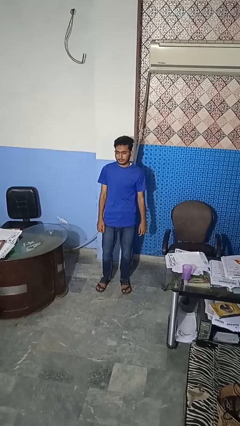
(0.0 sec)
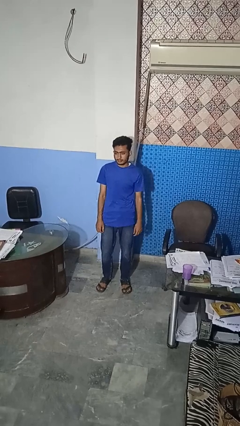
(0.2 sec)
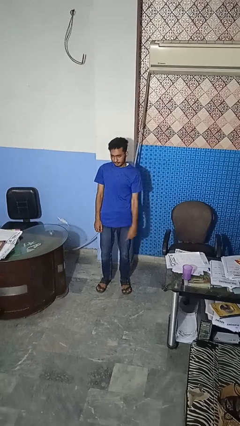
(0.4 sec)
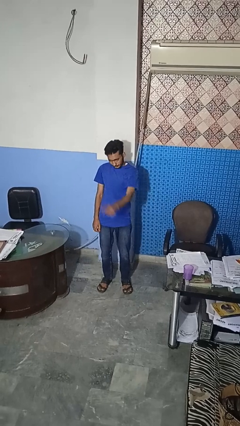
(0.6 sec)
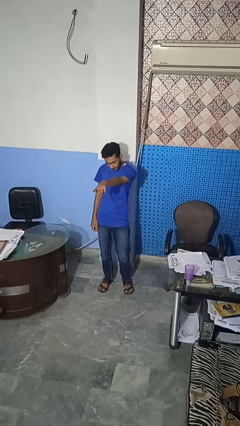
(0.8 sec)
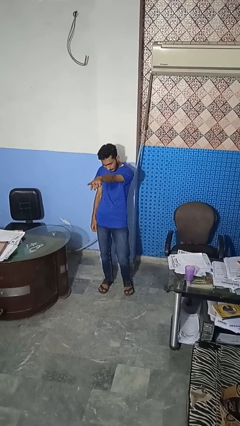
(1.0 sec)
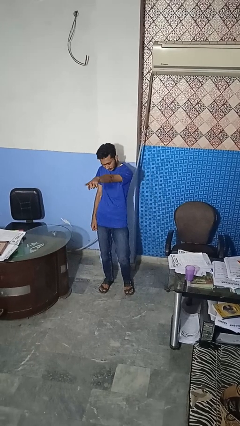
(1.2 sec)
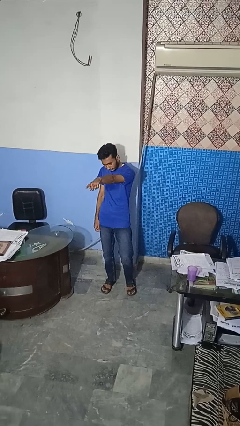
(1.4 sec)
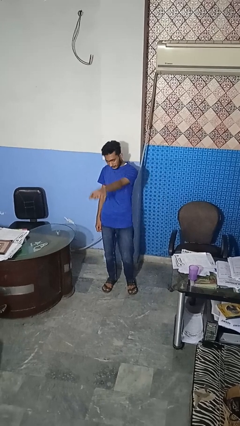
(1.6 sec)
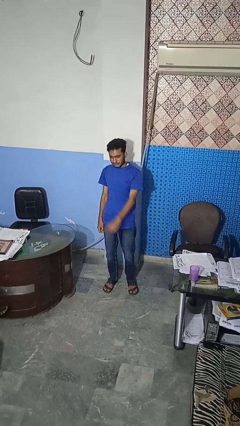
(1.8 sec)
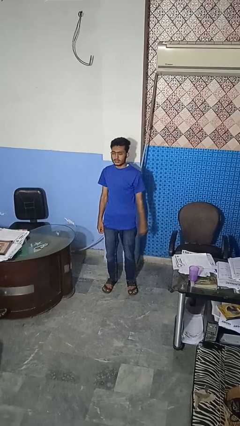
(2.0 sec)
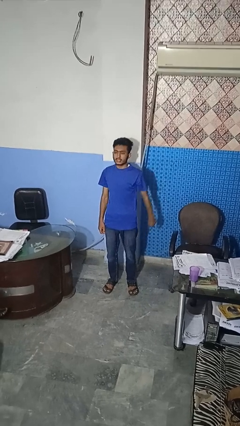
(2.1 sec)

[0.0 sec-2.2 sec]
person points at person

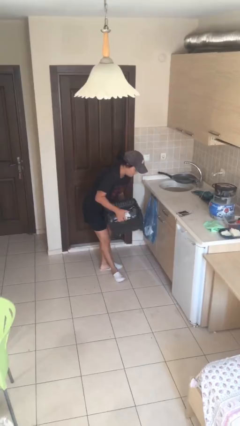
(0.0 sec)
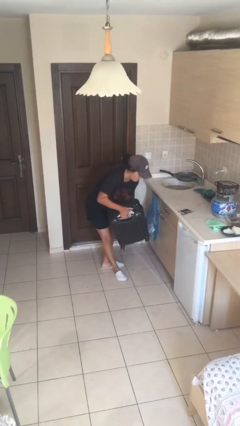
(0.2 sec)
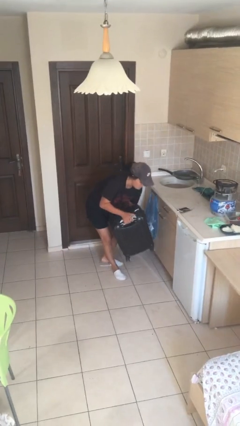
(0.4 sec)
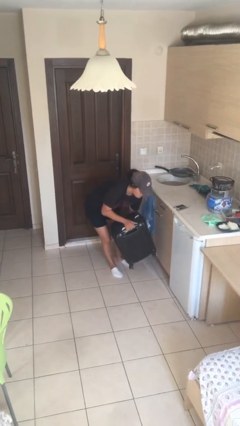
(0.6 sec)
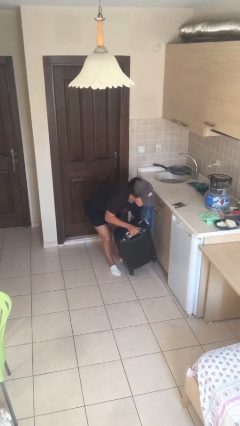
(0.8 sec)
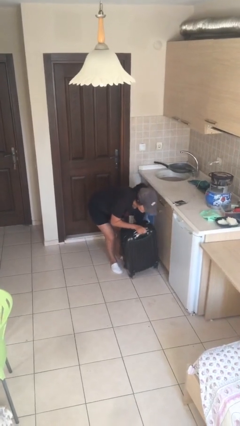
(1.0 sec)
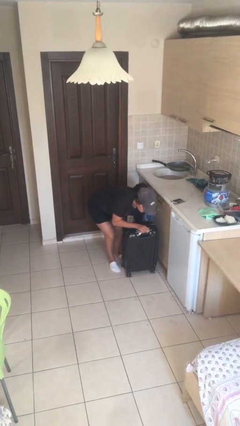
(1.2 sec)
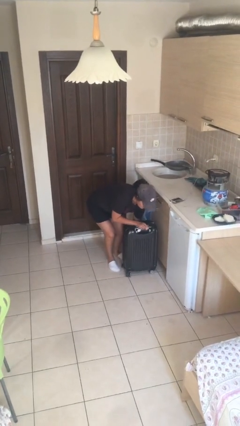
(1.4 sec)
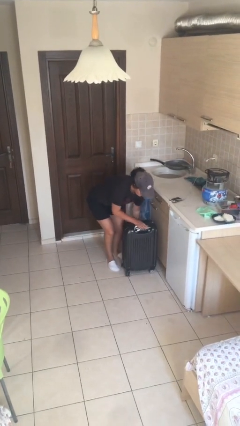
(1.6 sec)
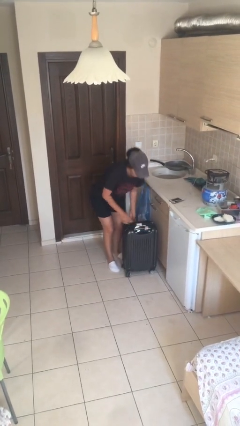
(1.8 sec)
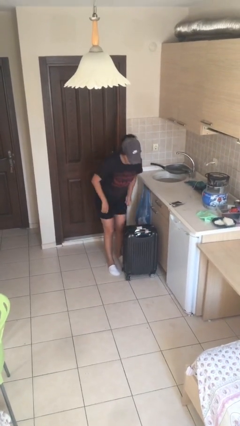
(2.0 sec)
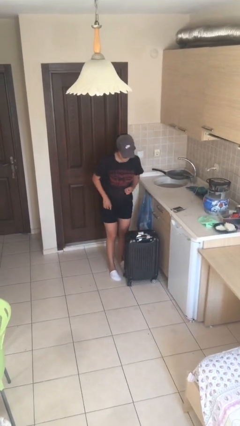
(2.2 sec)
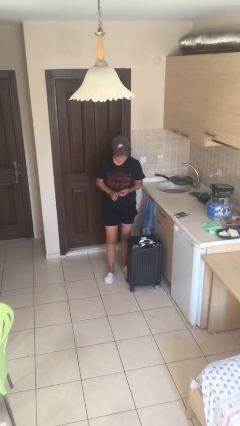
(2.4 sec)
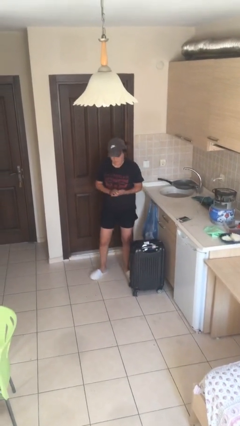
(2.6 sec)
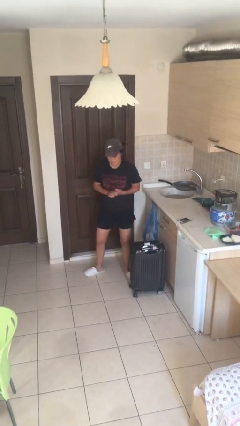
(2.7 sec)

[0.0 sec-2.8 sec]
person puts down object on floor

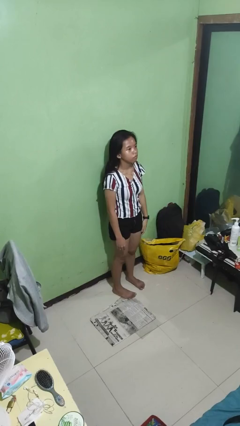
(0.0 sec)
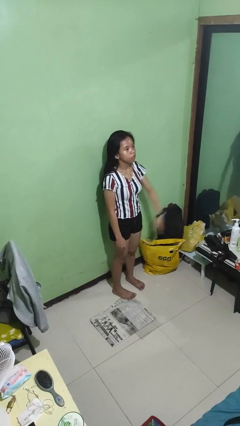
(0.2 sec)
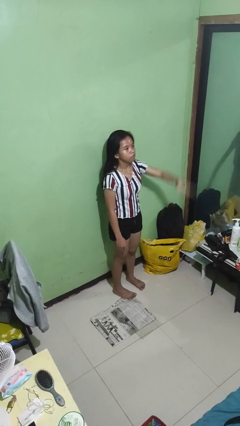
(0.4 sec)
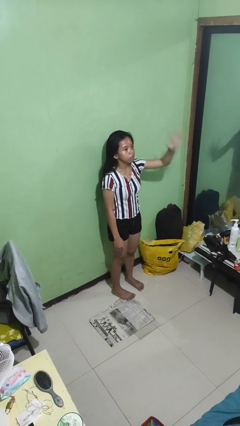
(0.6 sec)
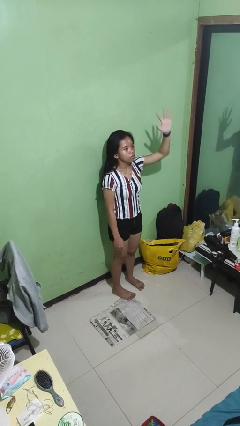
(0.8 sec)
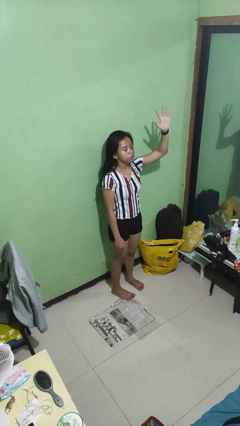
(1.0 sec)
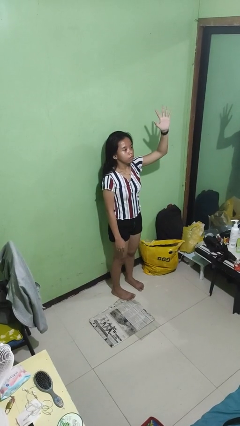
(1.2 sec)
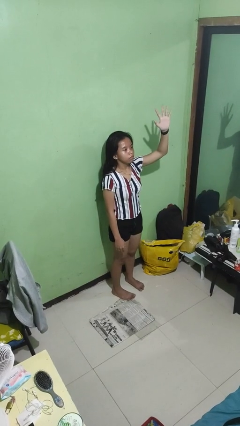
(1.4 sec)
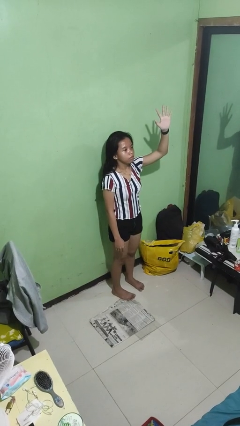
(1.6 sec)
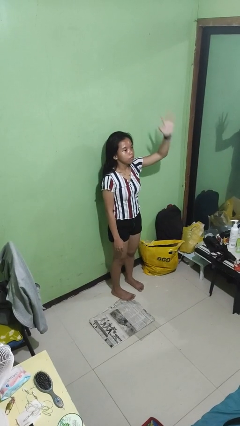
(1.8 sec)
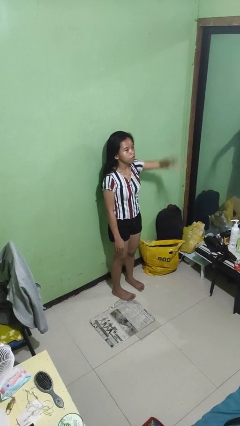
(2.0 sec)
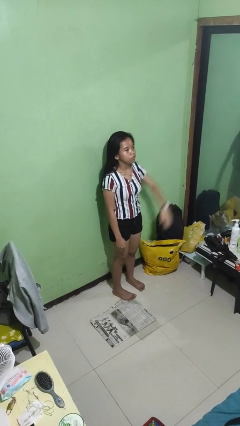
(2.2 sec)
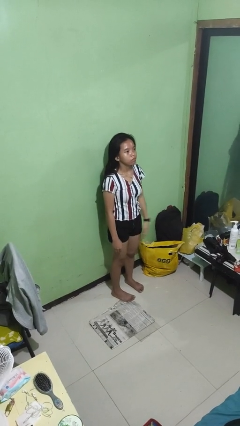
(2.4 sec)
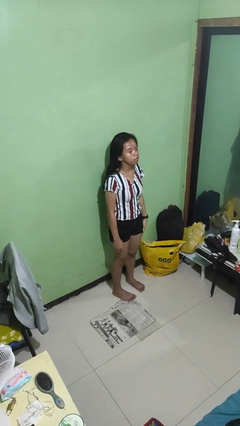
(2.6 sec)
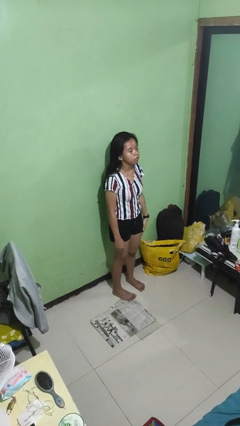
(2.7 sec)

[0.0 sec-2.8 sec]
person gestures number five

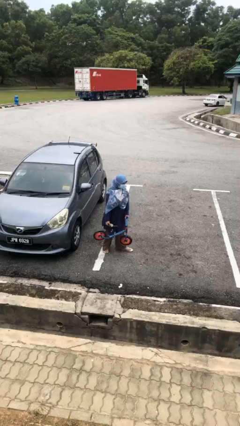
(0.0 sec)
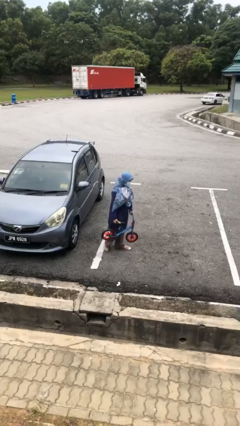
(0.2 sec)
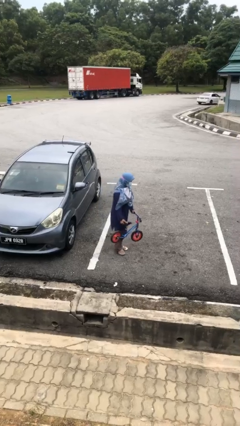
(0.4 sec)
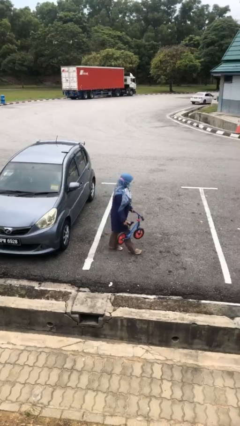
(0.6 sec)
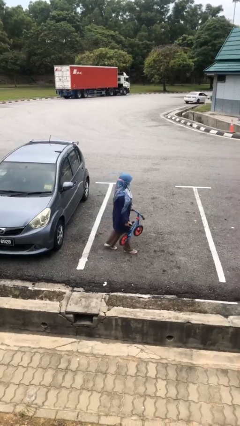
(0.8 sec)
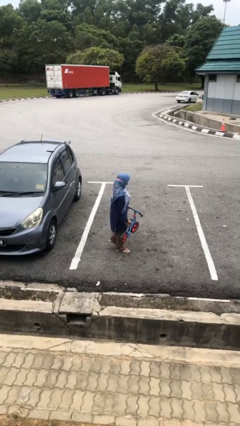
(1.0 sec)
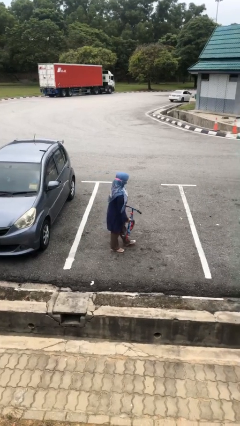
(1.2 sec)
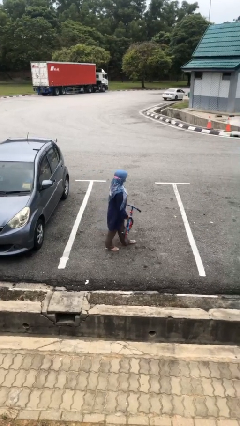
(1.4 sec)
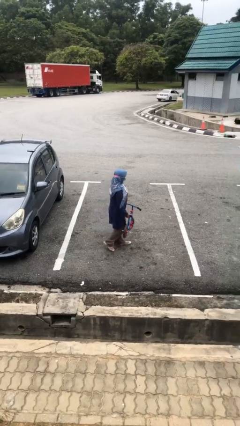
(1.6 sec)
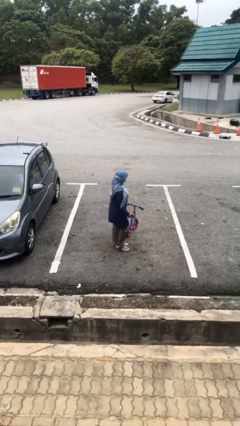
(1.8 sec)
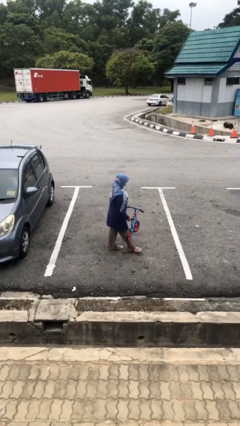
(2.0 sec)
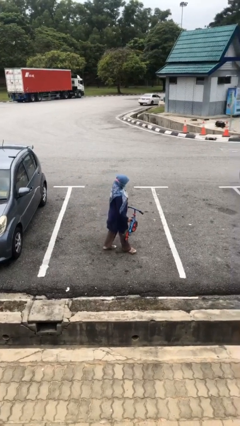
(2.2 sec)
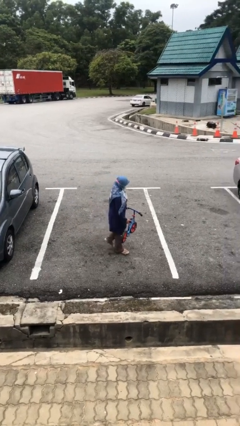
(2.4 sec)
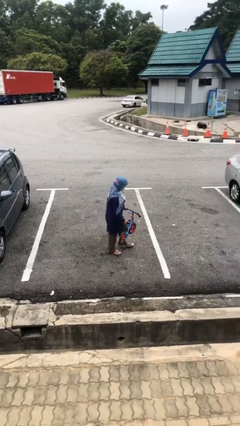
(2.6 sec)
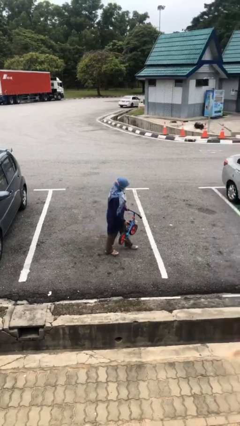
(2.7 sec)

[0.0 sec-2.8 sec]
person carries heavy object

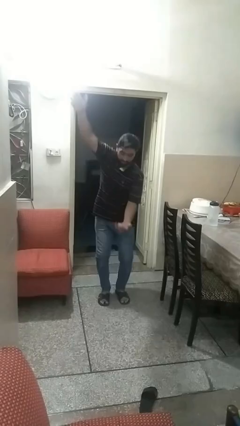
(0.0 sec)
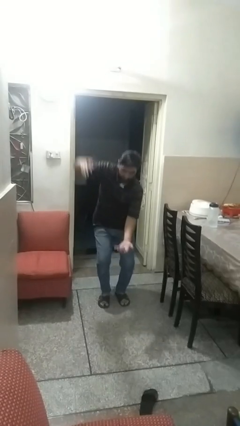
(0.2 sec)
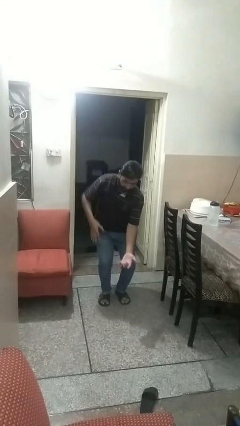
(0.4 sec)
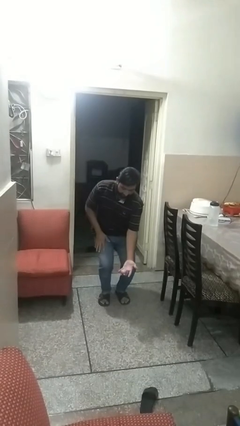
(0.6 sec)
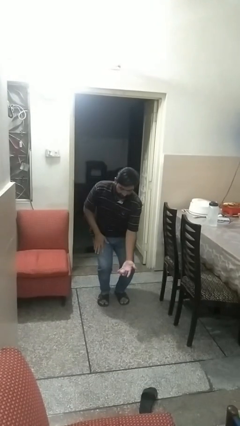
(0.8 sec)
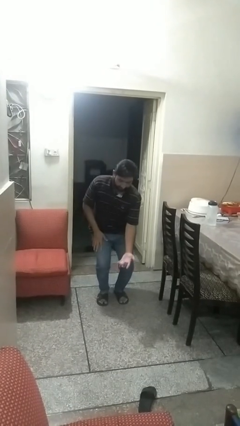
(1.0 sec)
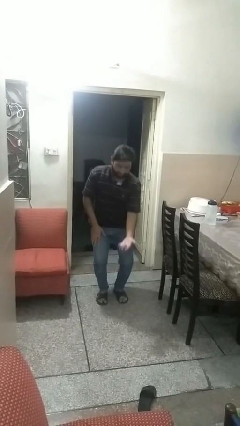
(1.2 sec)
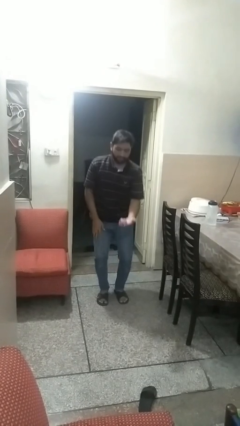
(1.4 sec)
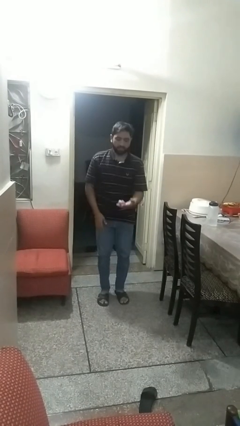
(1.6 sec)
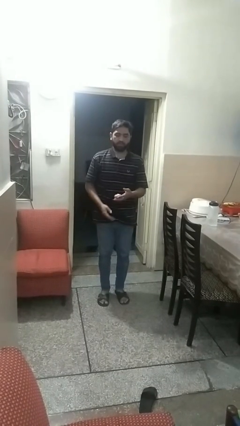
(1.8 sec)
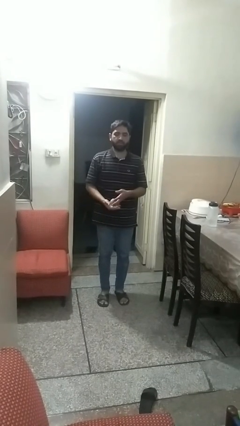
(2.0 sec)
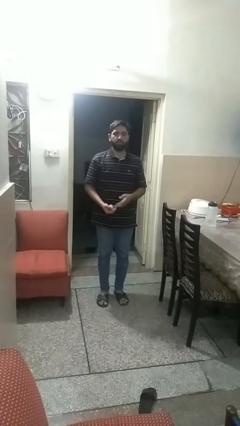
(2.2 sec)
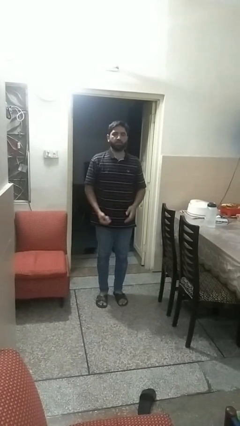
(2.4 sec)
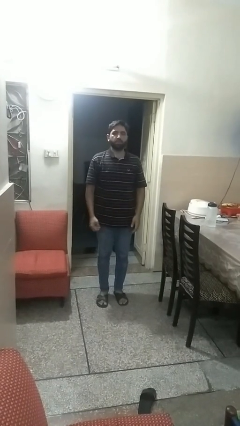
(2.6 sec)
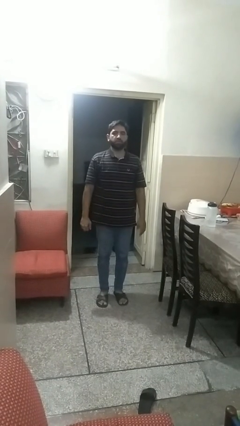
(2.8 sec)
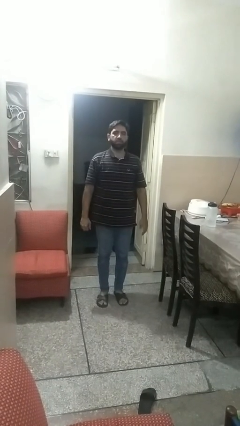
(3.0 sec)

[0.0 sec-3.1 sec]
person catches dropped object

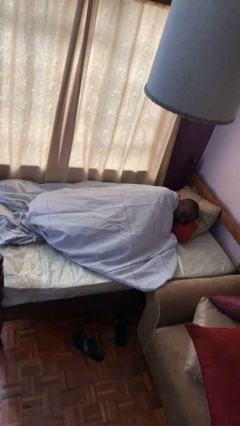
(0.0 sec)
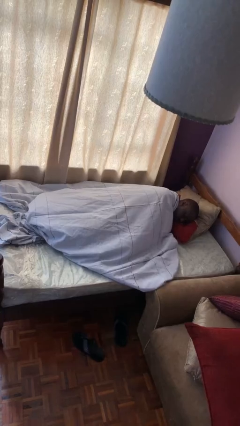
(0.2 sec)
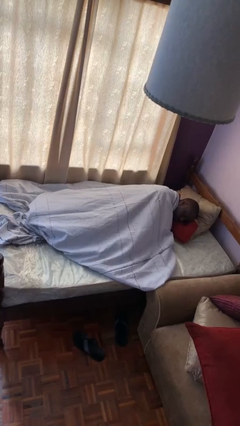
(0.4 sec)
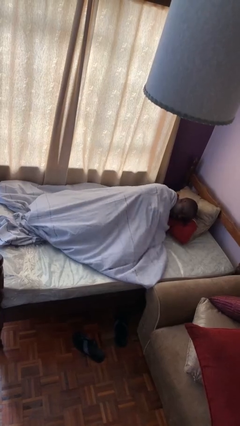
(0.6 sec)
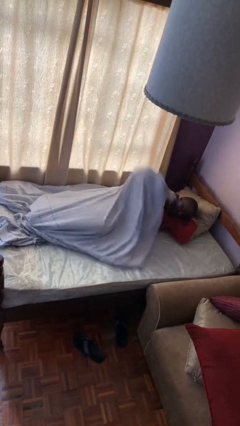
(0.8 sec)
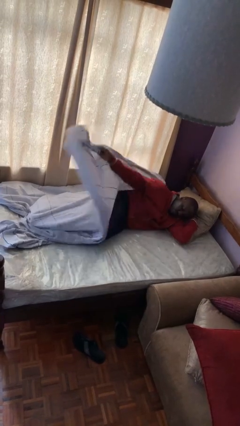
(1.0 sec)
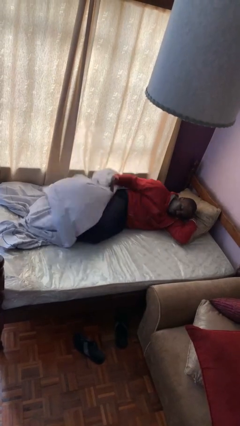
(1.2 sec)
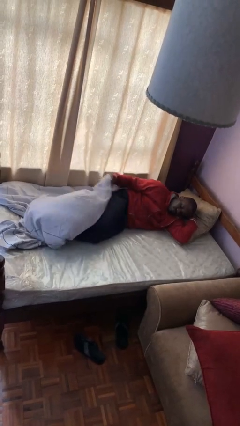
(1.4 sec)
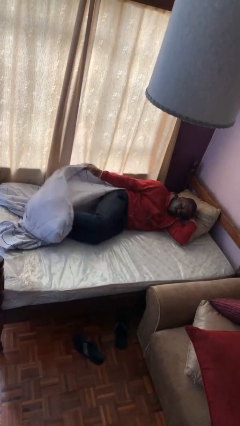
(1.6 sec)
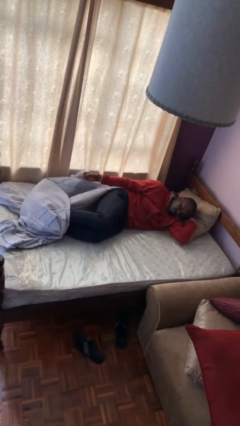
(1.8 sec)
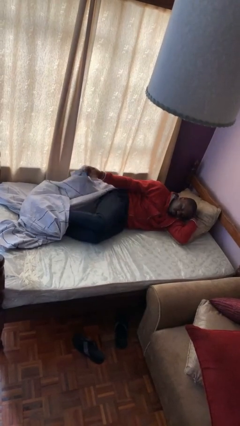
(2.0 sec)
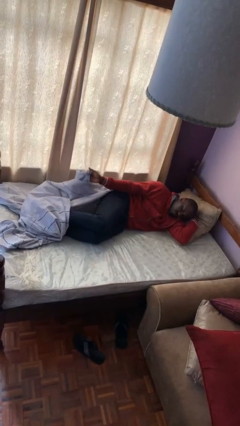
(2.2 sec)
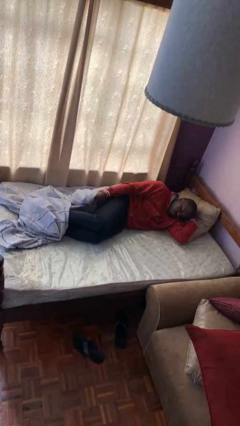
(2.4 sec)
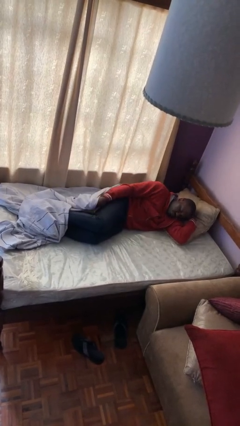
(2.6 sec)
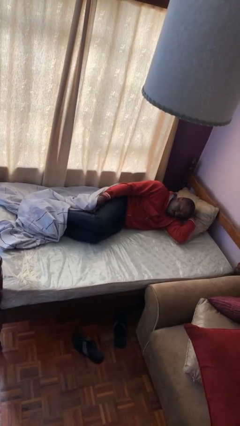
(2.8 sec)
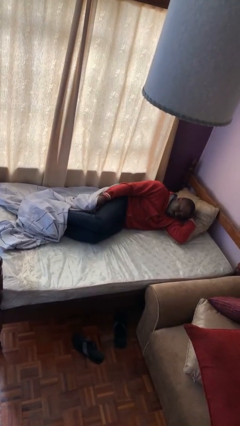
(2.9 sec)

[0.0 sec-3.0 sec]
person uncovers with bedsheets

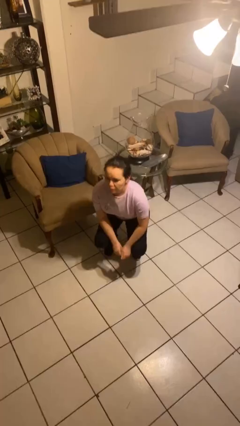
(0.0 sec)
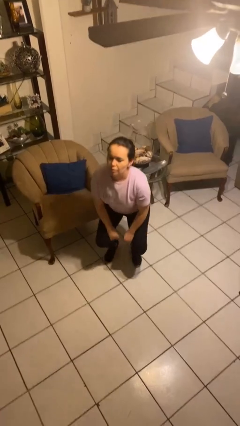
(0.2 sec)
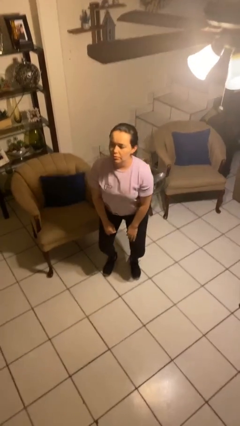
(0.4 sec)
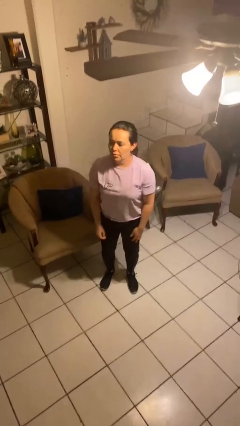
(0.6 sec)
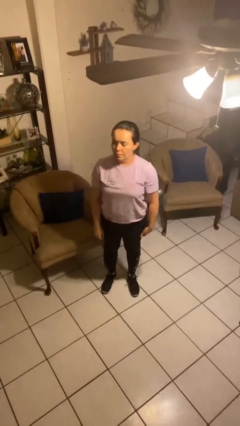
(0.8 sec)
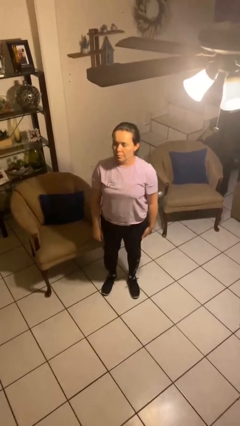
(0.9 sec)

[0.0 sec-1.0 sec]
person stands up
